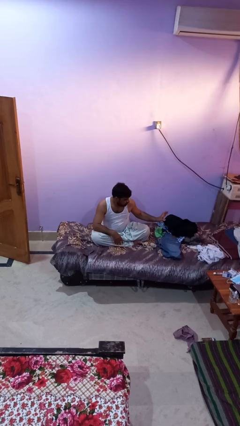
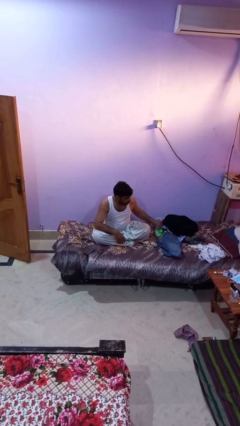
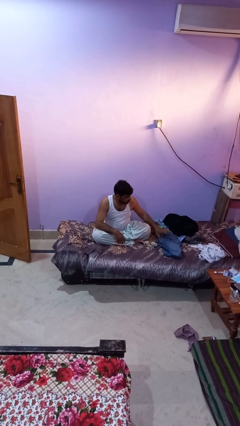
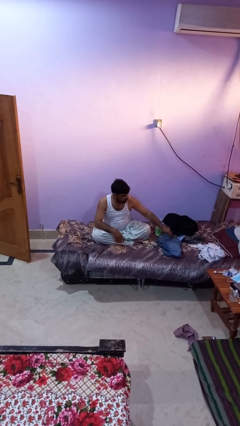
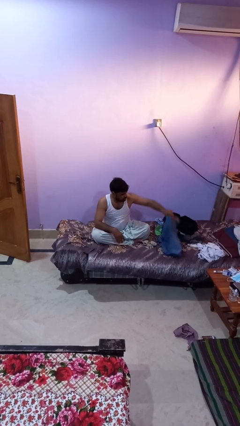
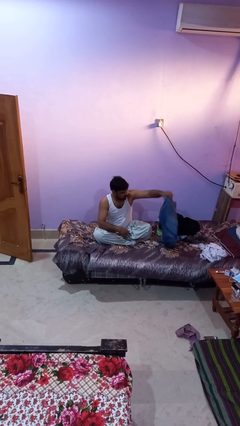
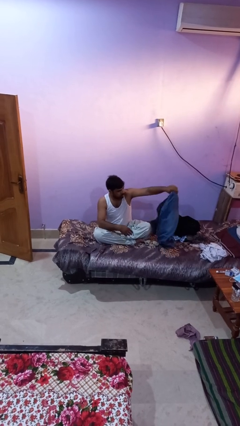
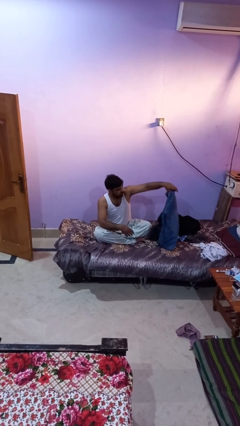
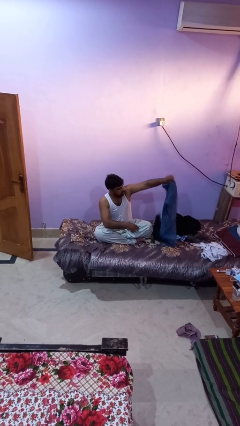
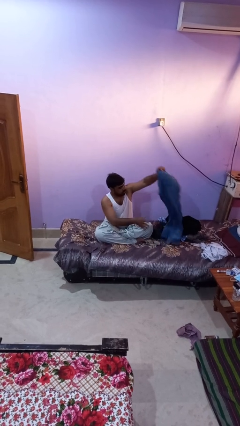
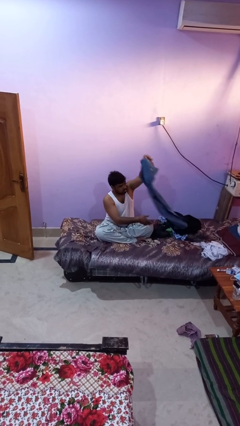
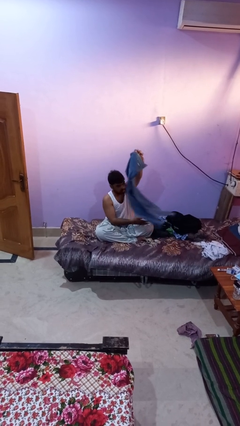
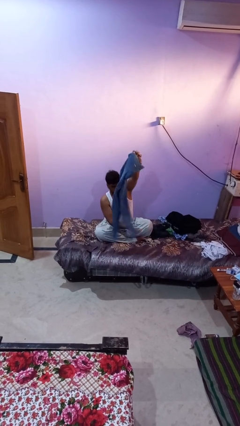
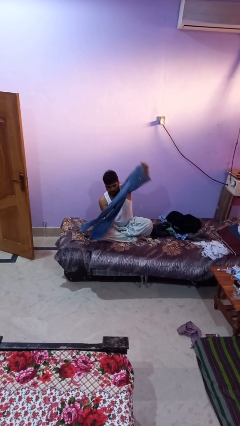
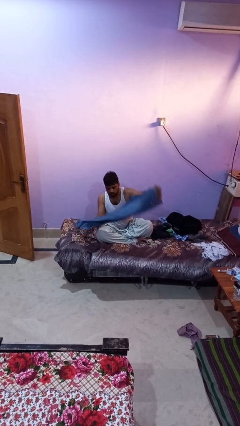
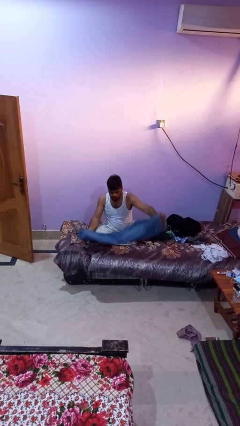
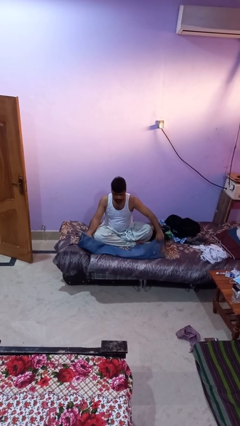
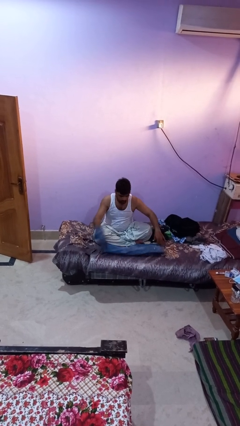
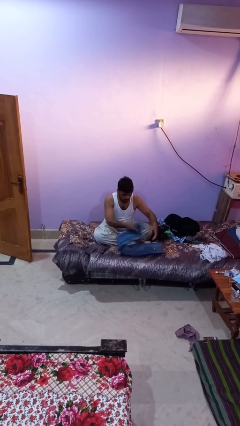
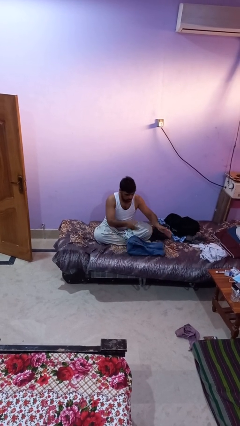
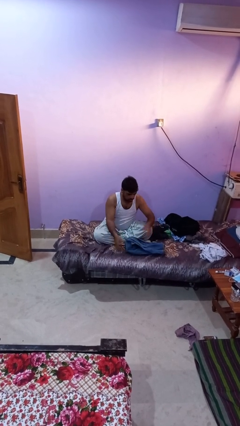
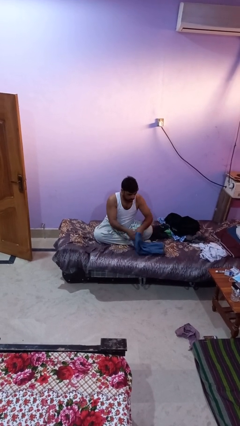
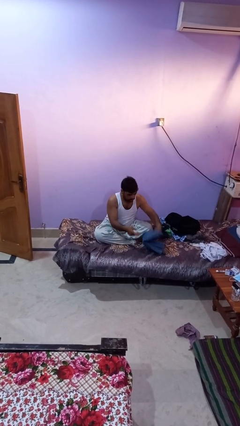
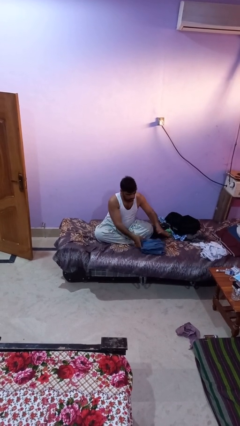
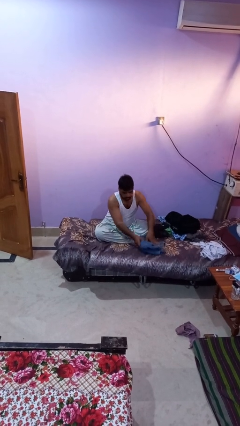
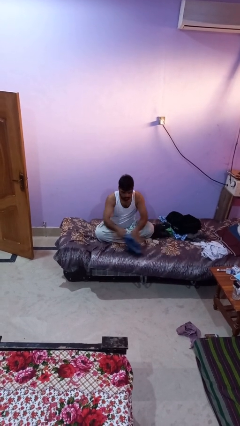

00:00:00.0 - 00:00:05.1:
person folds pants

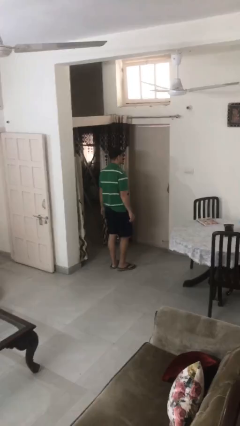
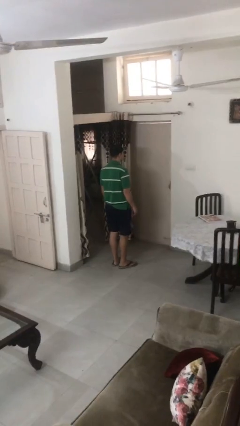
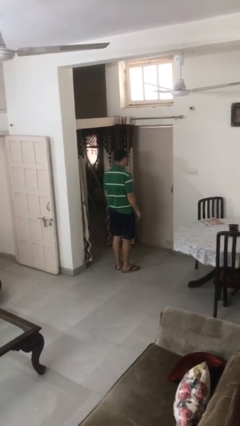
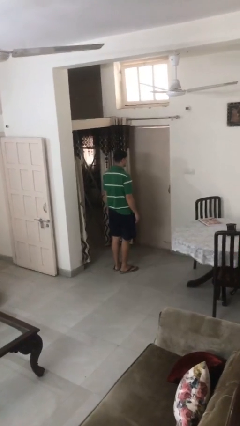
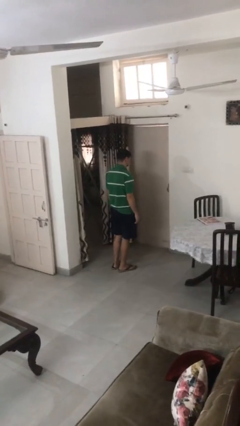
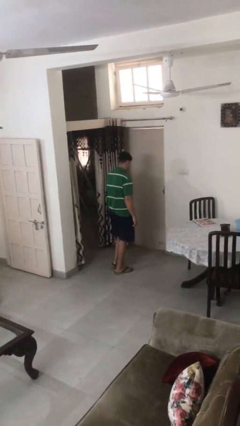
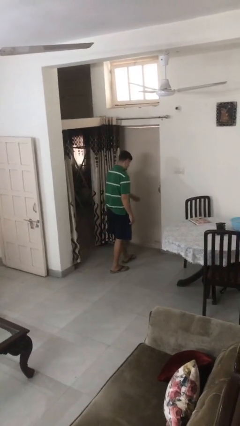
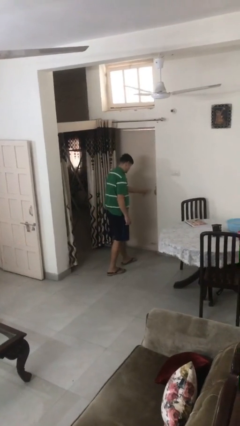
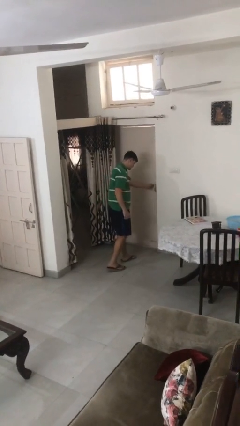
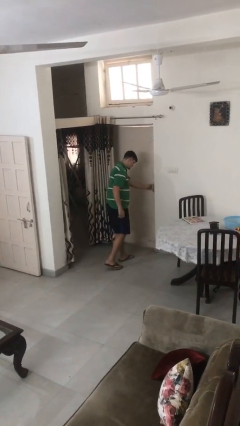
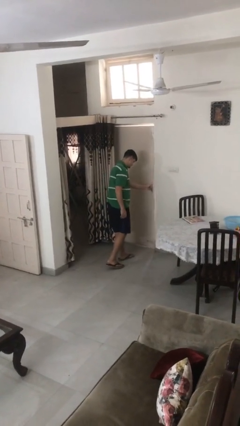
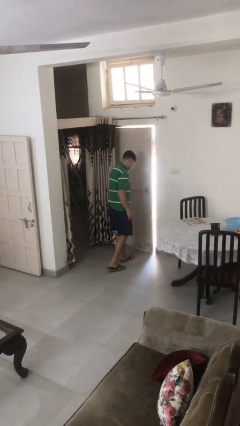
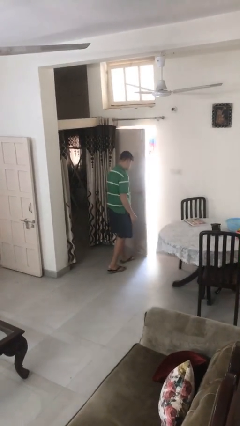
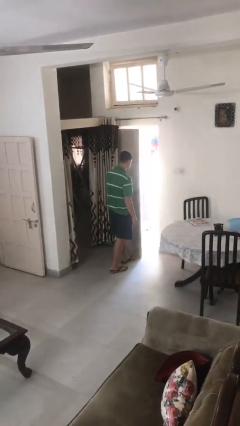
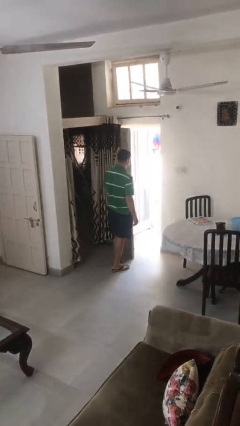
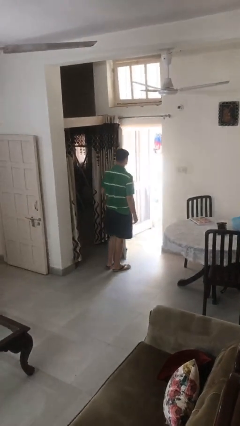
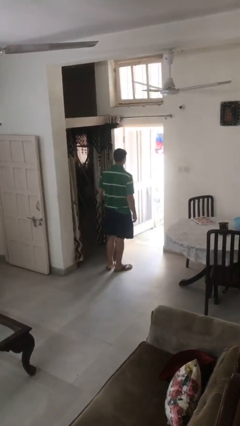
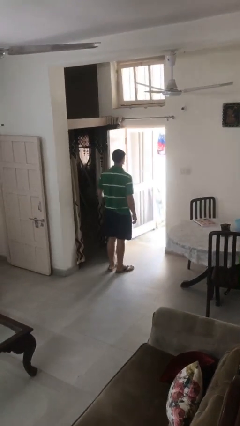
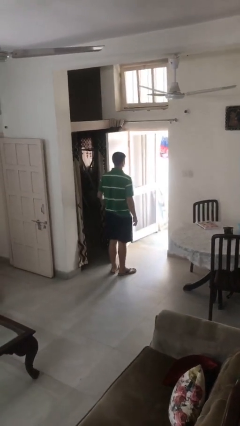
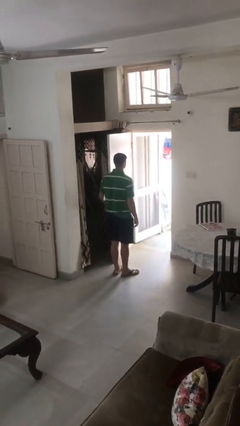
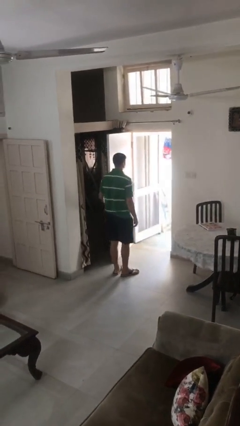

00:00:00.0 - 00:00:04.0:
person opens facility door

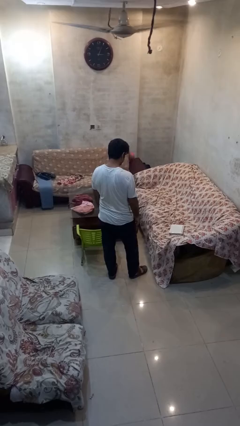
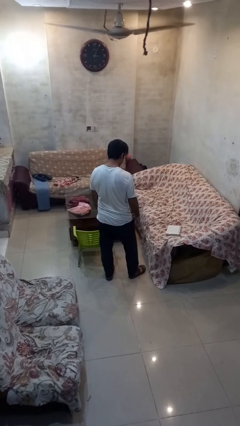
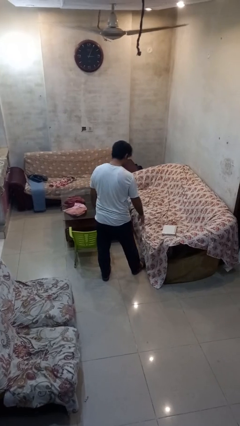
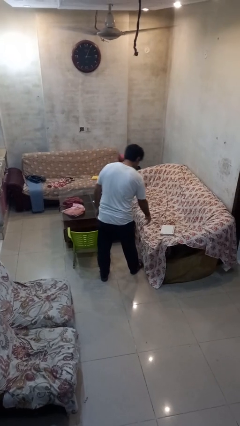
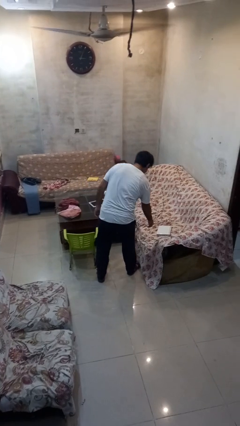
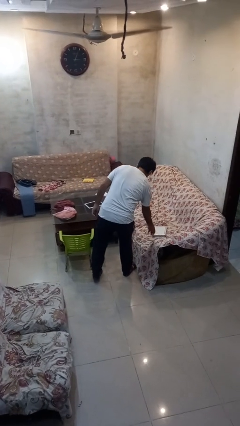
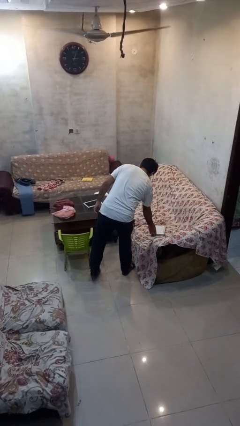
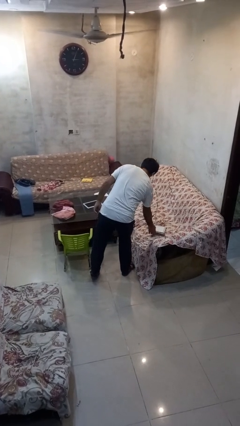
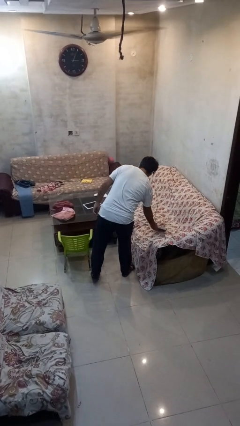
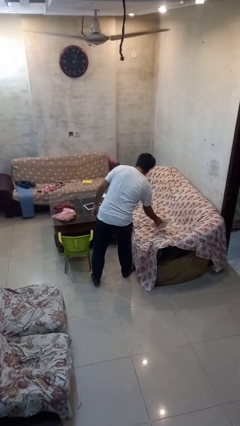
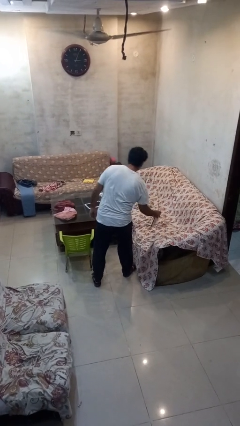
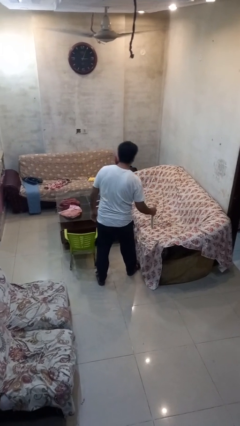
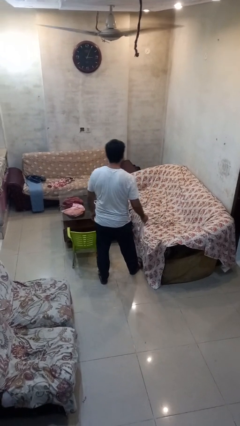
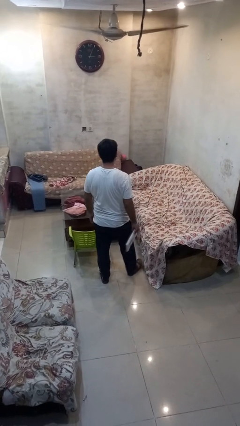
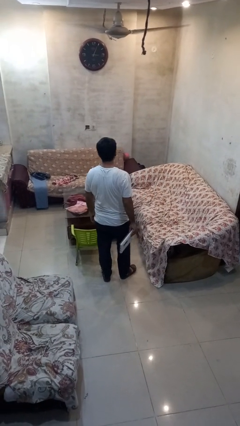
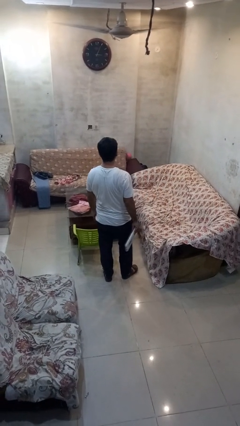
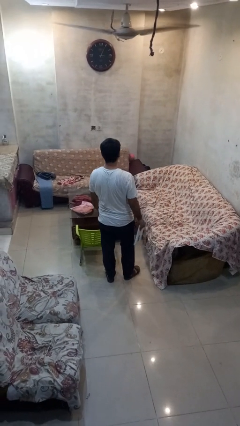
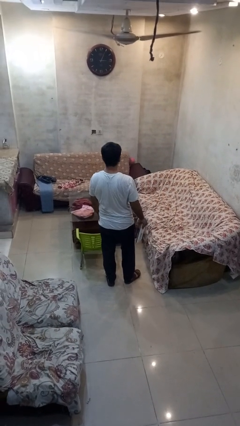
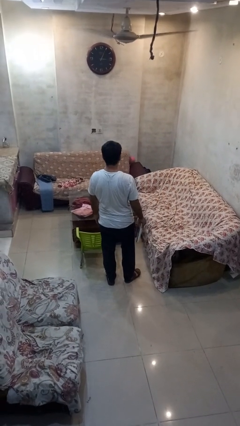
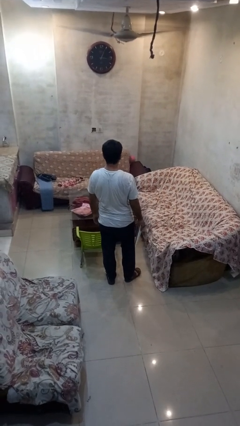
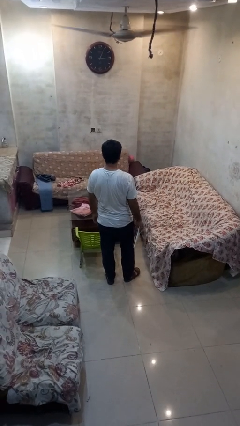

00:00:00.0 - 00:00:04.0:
person picks up object from couch

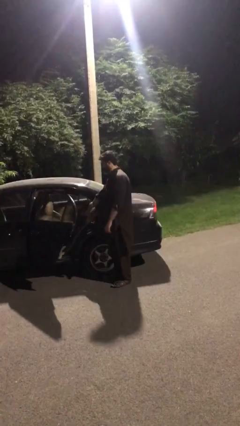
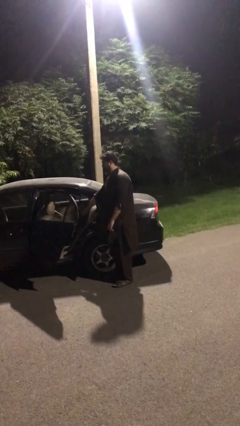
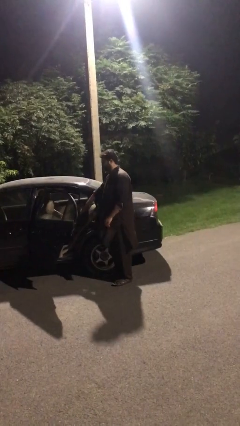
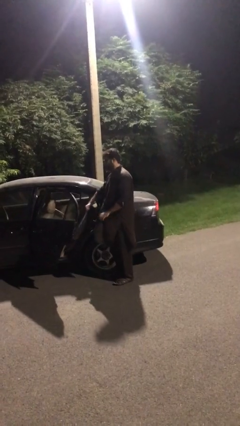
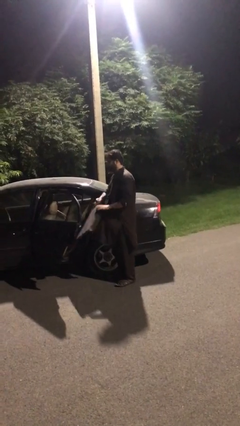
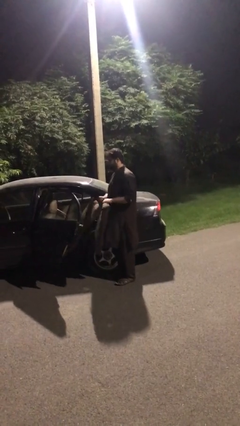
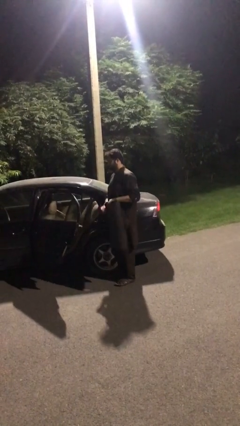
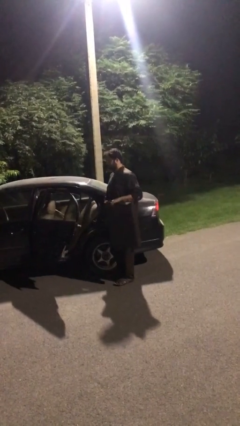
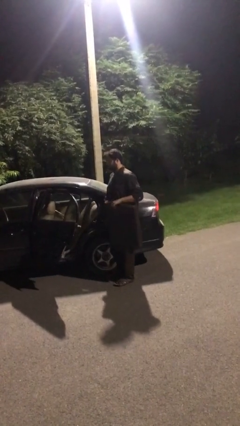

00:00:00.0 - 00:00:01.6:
person unloads car

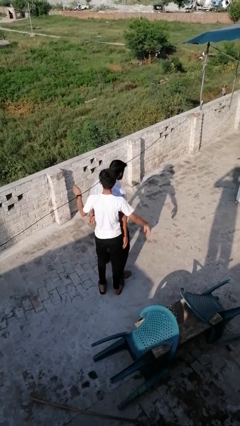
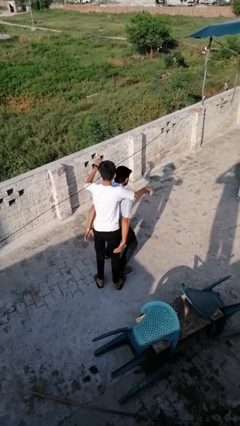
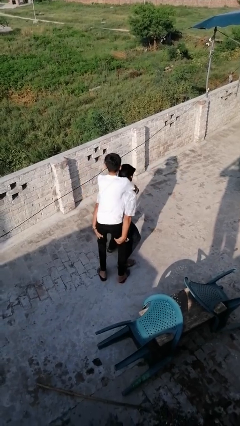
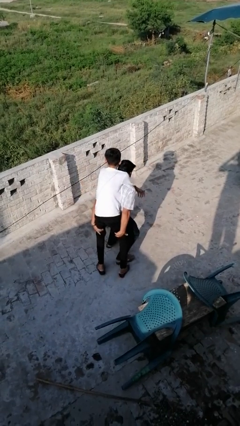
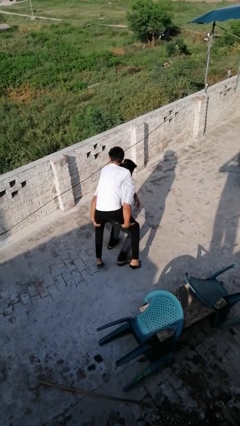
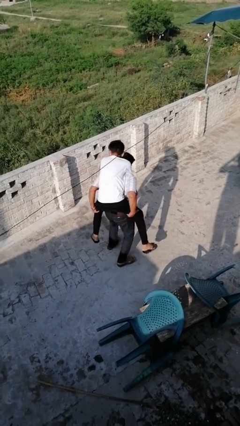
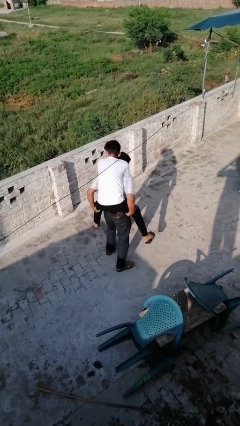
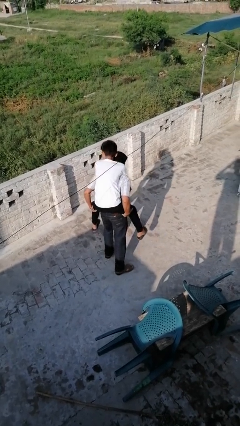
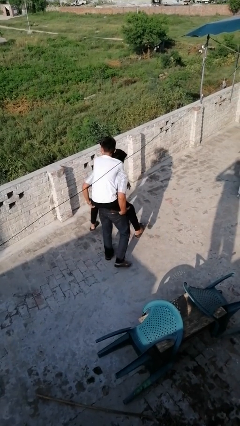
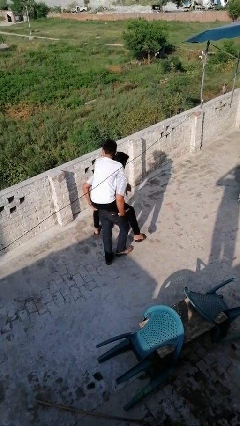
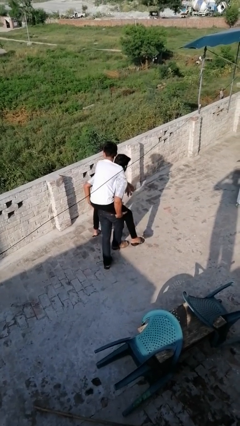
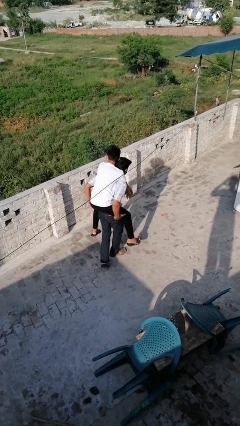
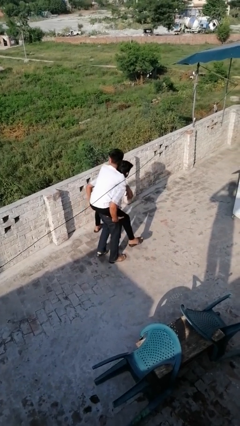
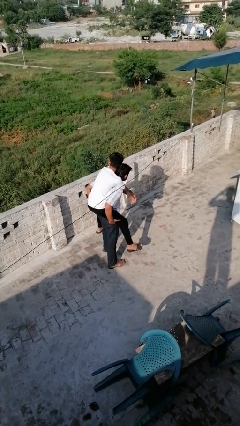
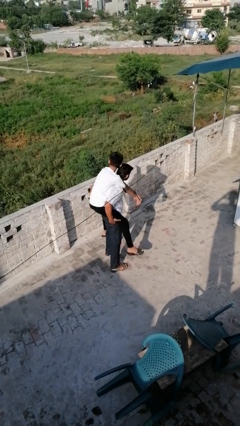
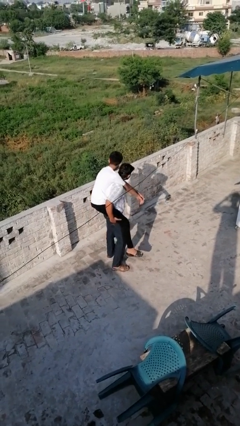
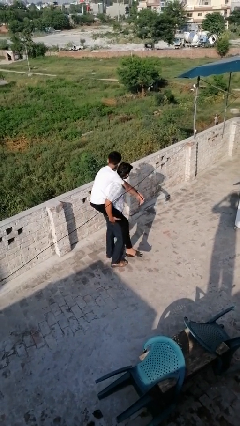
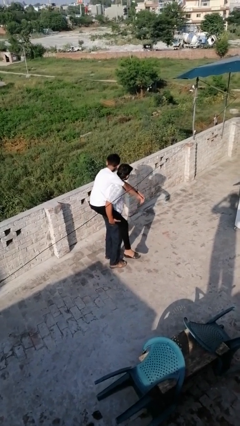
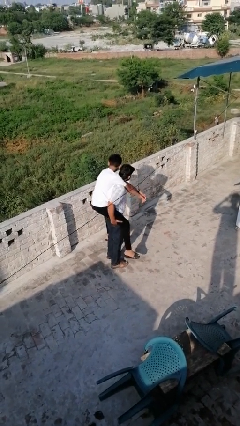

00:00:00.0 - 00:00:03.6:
person carries person on back
